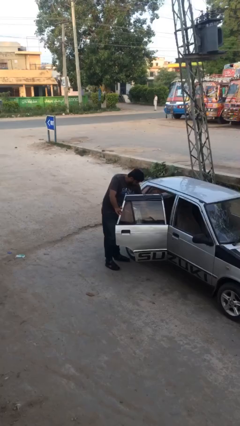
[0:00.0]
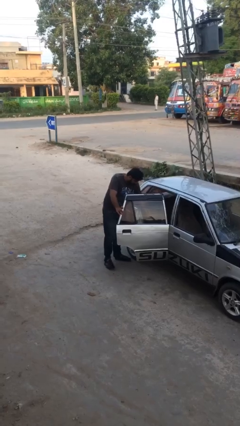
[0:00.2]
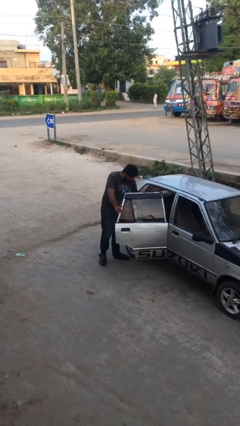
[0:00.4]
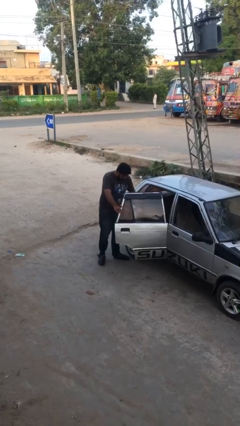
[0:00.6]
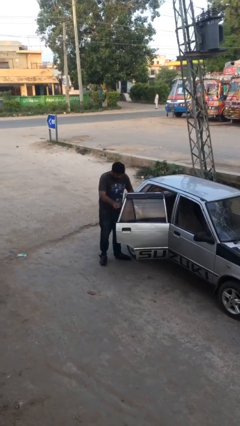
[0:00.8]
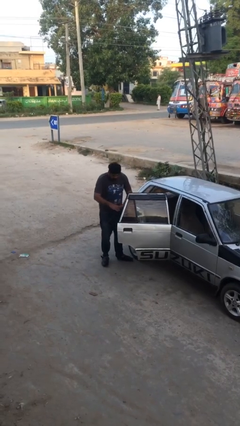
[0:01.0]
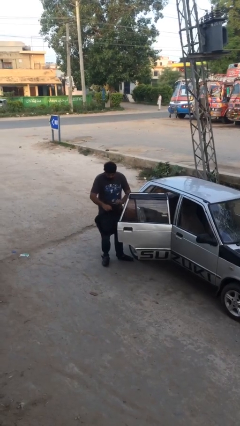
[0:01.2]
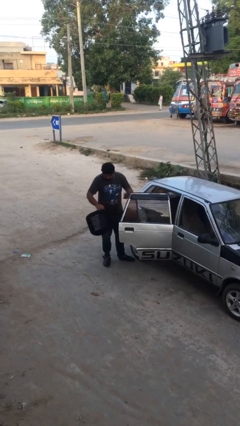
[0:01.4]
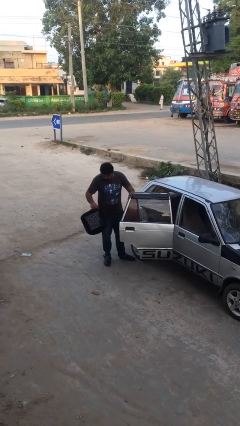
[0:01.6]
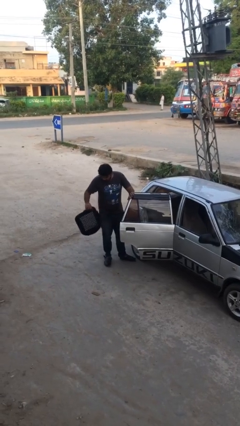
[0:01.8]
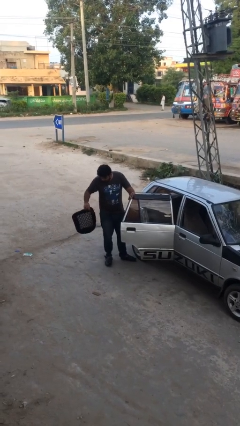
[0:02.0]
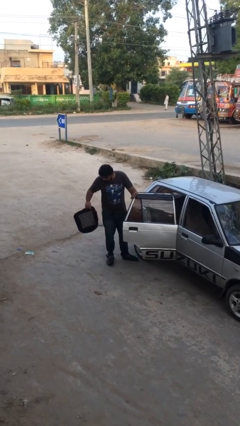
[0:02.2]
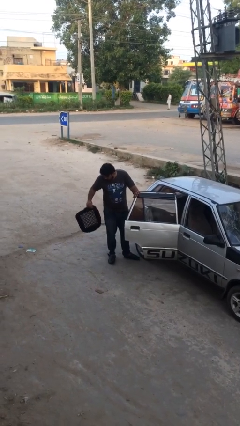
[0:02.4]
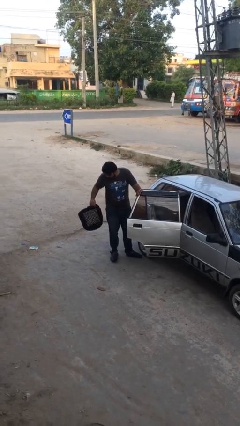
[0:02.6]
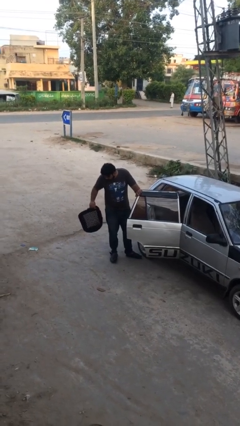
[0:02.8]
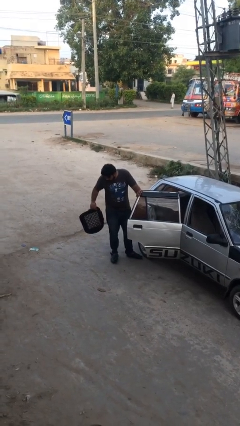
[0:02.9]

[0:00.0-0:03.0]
person unloads car

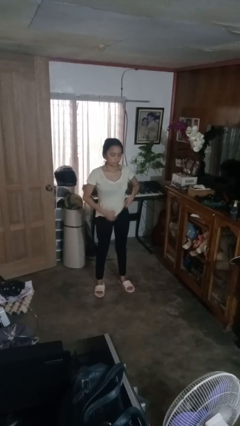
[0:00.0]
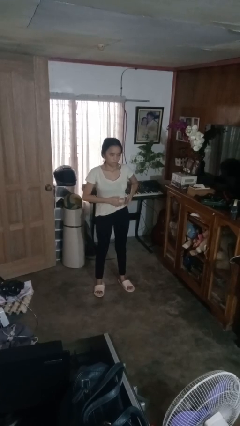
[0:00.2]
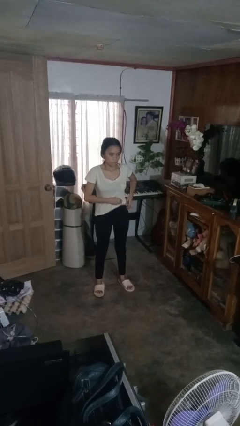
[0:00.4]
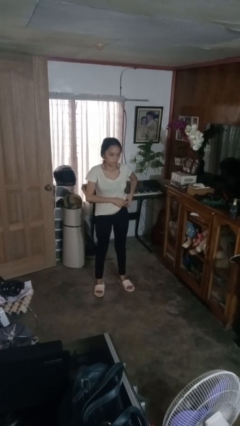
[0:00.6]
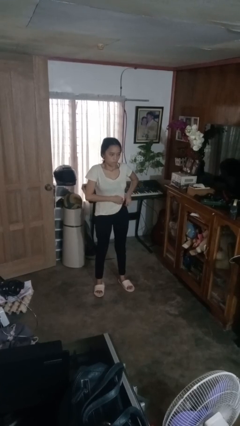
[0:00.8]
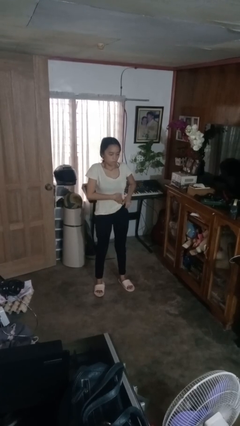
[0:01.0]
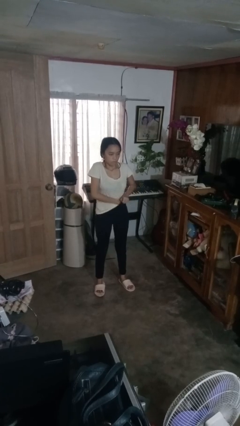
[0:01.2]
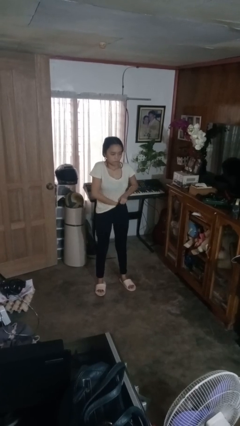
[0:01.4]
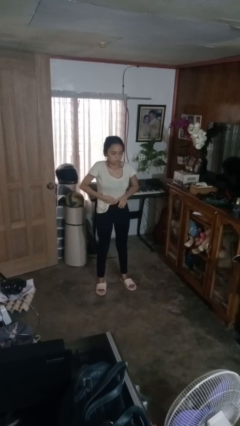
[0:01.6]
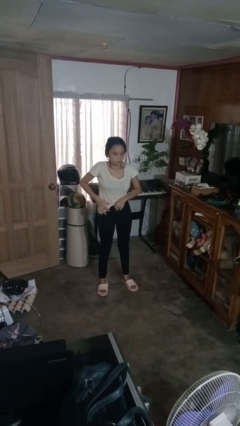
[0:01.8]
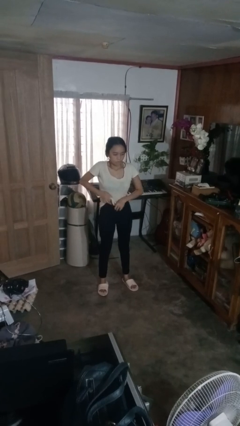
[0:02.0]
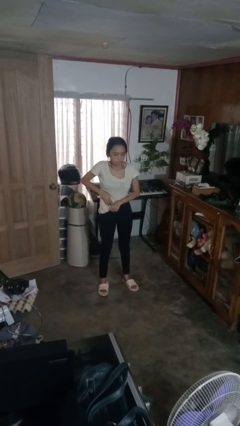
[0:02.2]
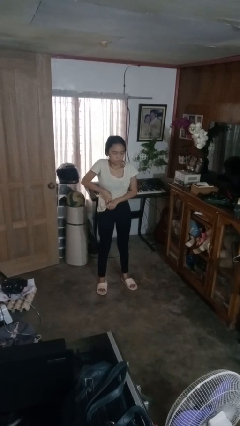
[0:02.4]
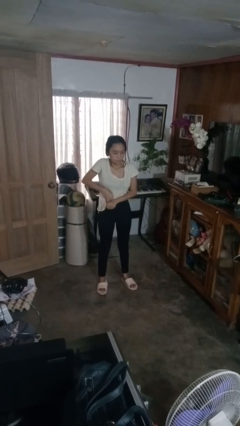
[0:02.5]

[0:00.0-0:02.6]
person tucks in shirt

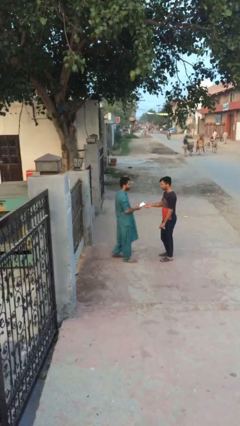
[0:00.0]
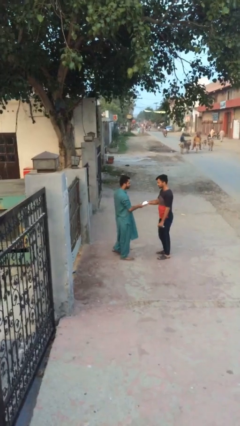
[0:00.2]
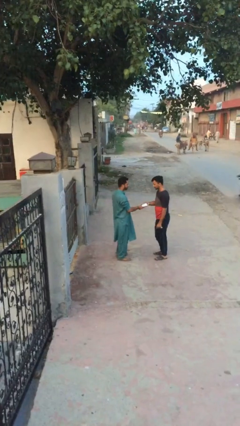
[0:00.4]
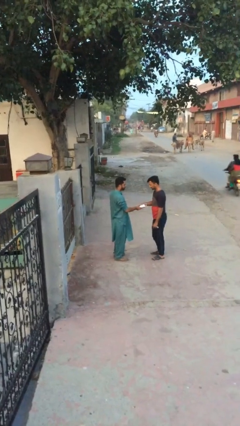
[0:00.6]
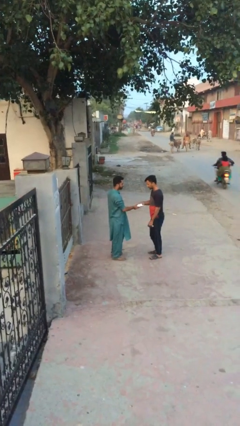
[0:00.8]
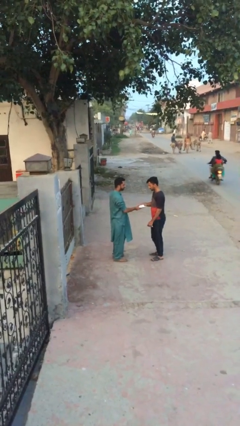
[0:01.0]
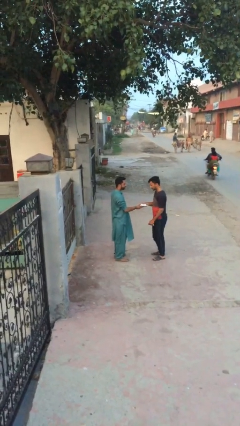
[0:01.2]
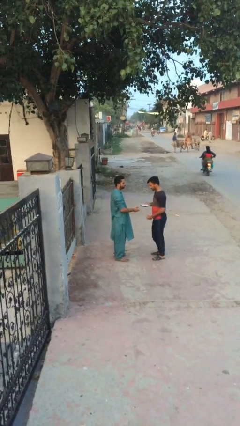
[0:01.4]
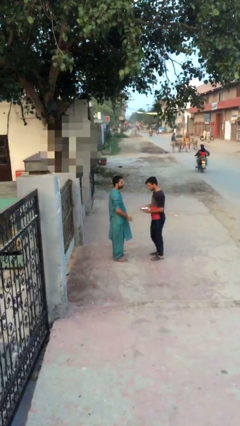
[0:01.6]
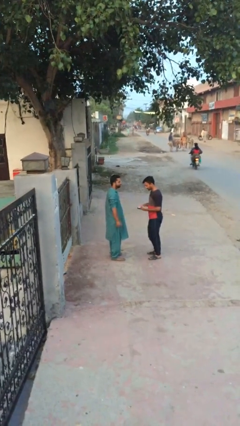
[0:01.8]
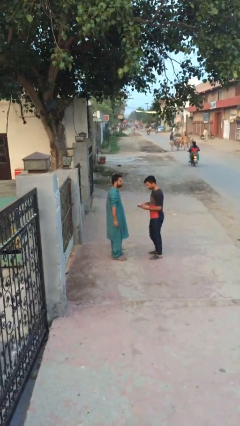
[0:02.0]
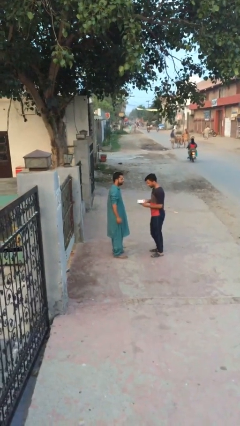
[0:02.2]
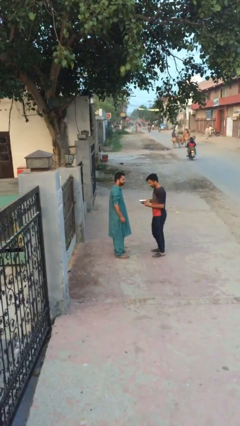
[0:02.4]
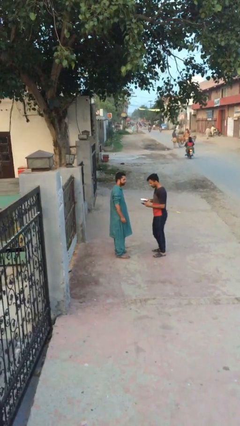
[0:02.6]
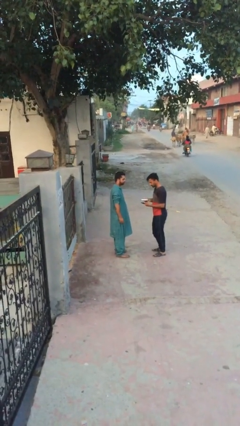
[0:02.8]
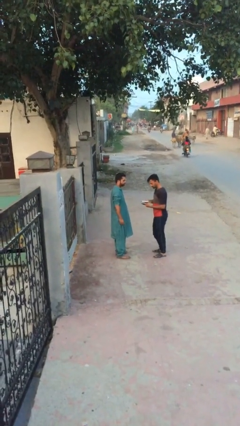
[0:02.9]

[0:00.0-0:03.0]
person transfers object to person

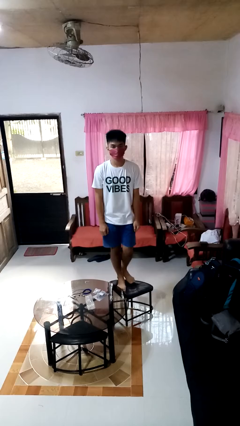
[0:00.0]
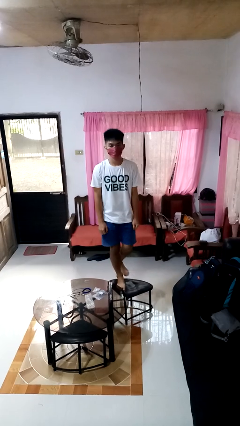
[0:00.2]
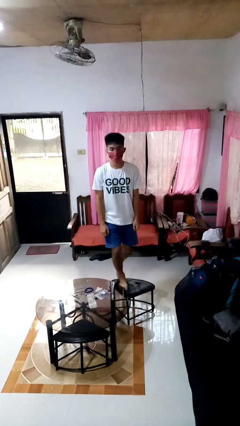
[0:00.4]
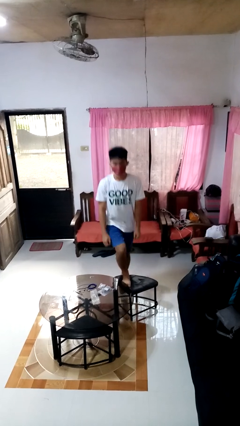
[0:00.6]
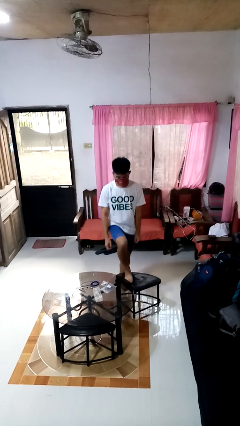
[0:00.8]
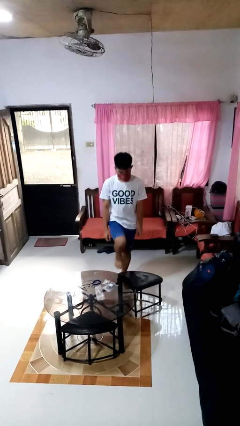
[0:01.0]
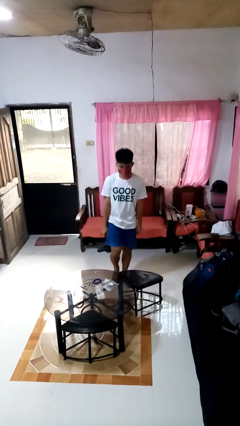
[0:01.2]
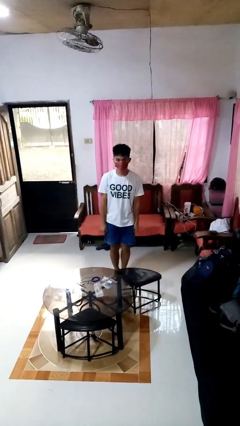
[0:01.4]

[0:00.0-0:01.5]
person climbs off chair

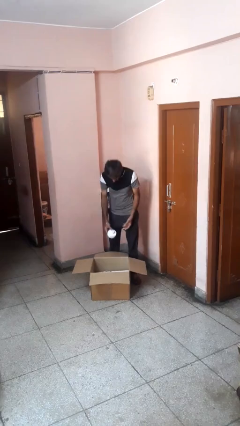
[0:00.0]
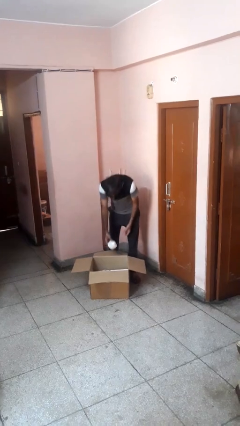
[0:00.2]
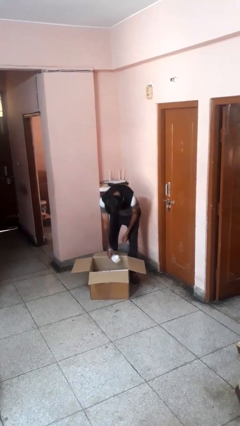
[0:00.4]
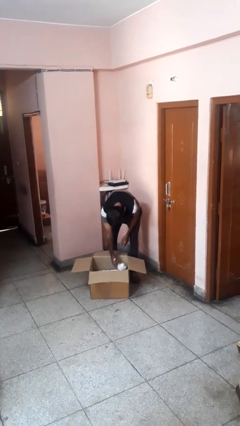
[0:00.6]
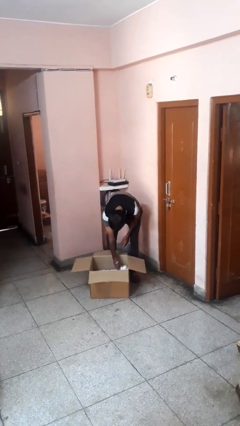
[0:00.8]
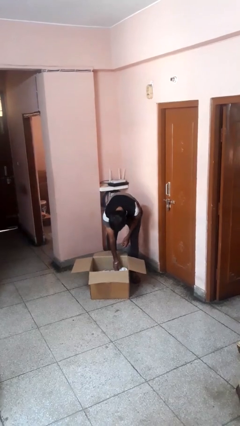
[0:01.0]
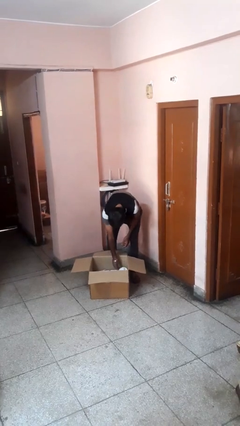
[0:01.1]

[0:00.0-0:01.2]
person puts object into box

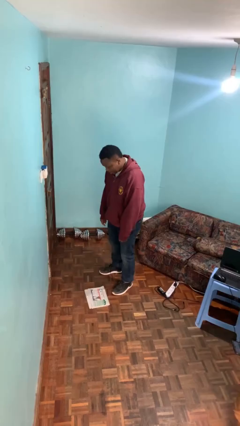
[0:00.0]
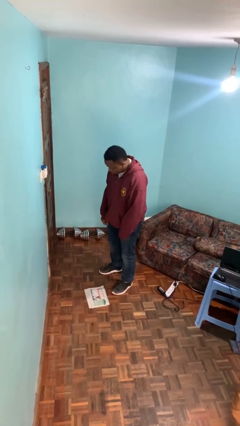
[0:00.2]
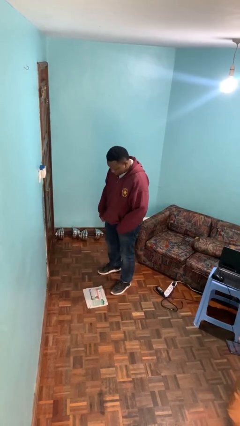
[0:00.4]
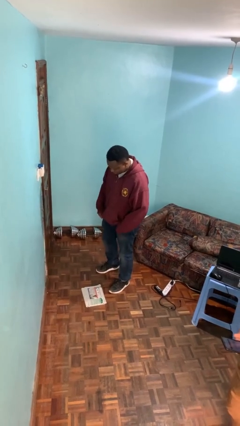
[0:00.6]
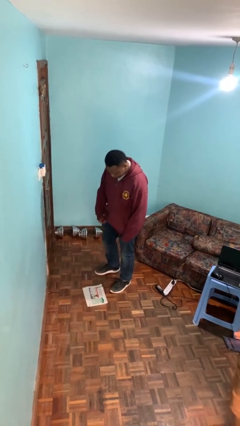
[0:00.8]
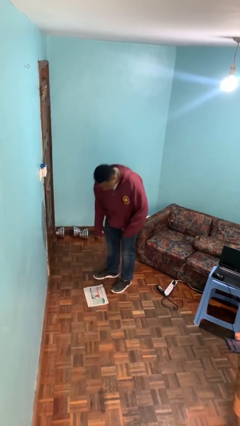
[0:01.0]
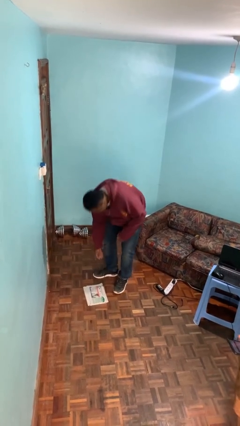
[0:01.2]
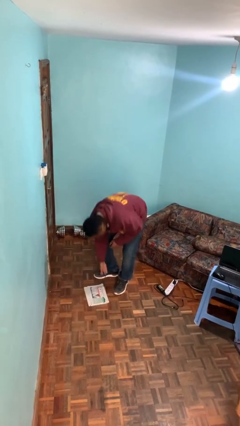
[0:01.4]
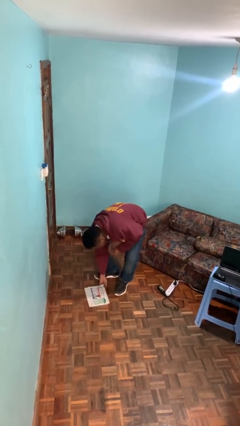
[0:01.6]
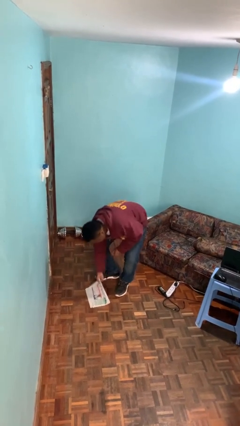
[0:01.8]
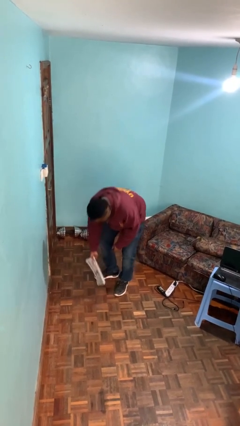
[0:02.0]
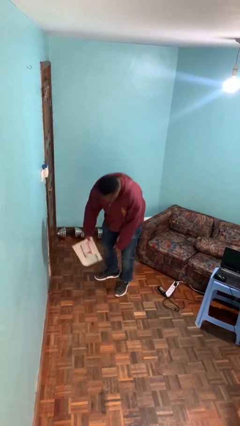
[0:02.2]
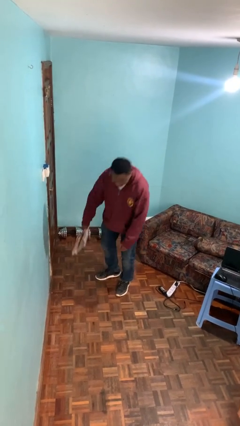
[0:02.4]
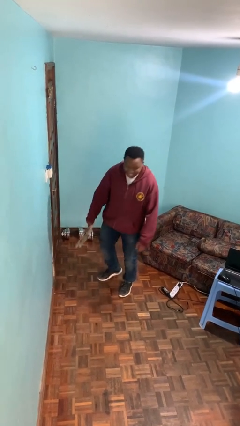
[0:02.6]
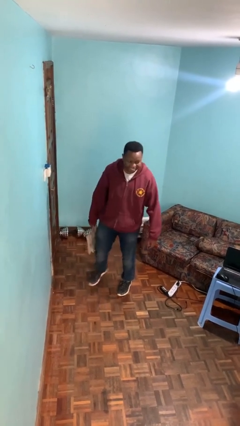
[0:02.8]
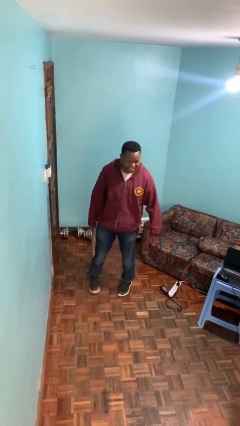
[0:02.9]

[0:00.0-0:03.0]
person picks up object from floor

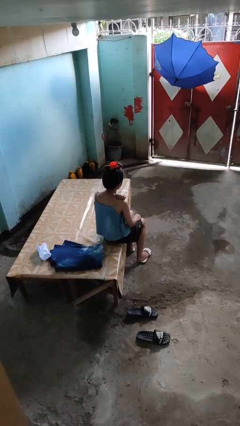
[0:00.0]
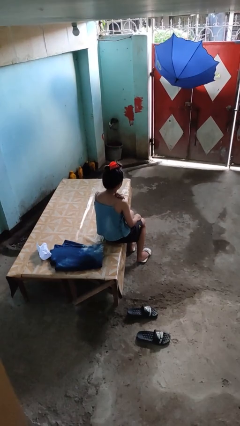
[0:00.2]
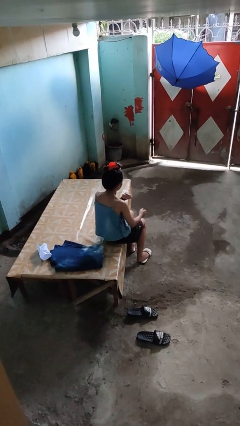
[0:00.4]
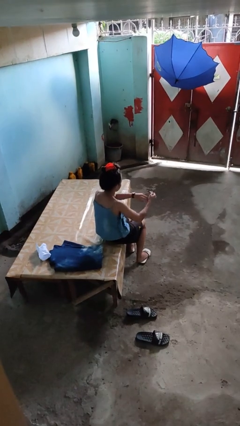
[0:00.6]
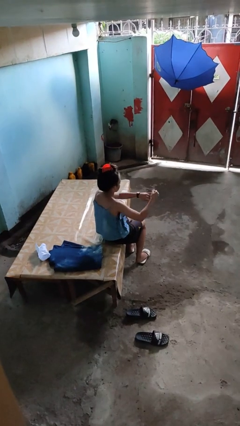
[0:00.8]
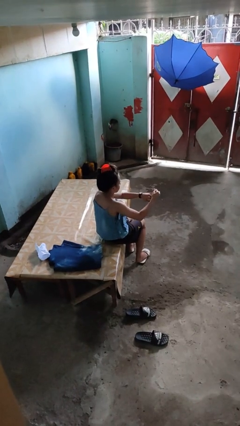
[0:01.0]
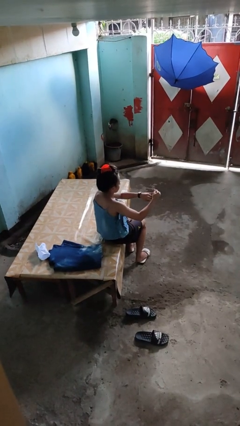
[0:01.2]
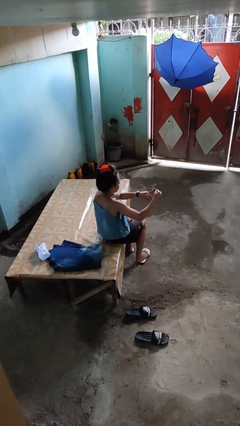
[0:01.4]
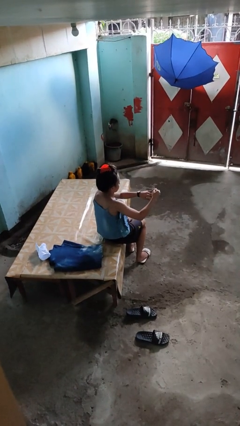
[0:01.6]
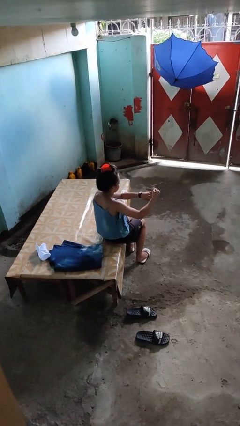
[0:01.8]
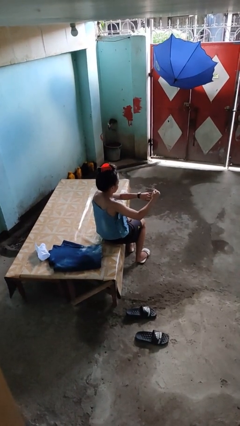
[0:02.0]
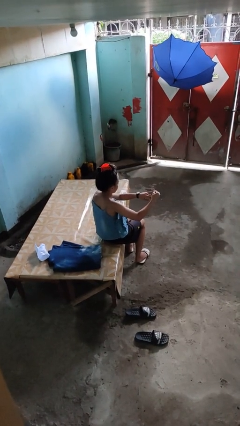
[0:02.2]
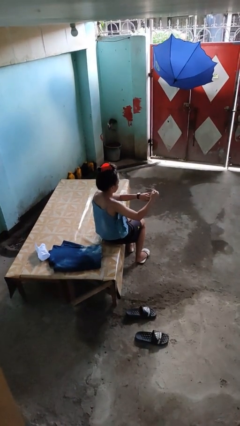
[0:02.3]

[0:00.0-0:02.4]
person files fingernails

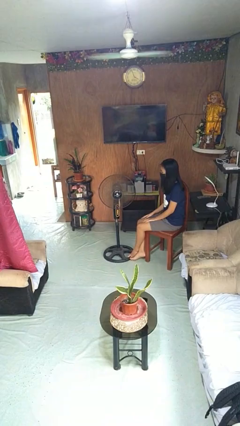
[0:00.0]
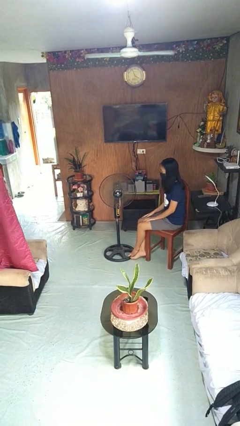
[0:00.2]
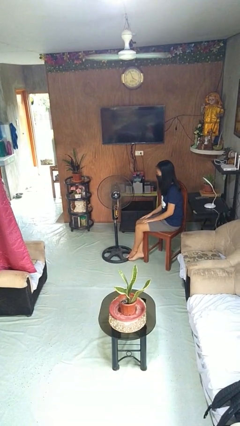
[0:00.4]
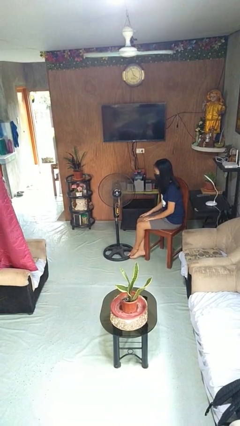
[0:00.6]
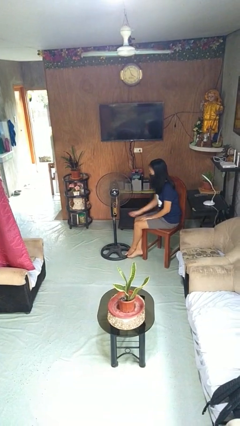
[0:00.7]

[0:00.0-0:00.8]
person turns off fan
